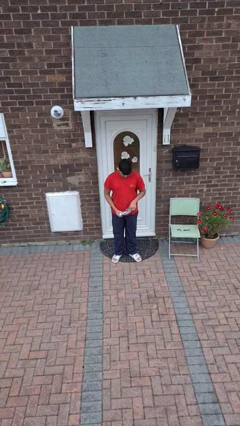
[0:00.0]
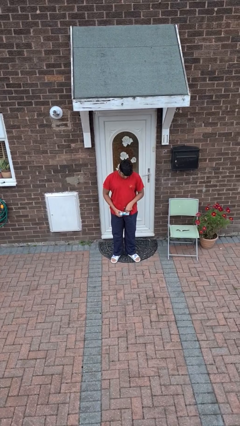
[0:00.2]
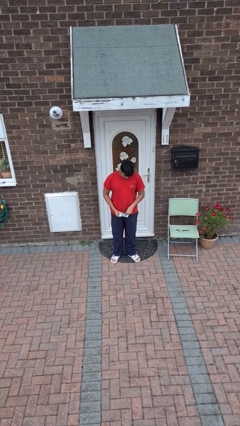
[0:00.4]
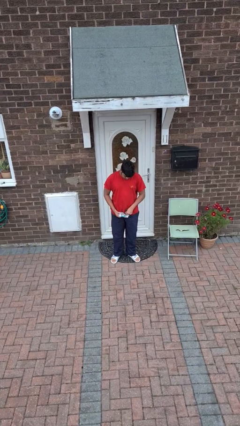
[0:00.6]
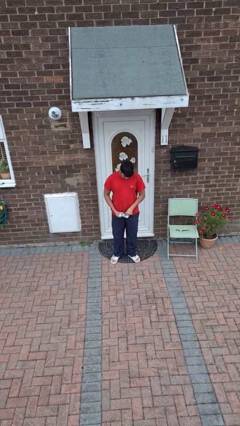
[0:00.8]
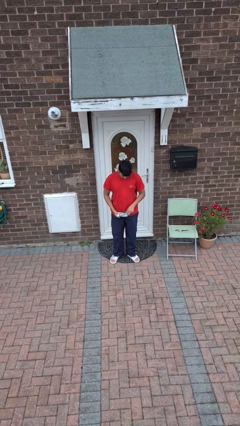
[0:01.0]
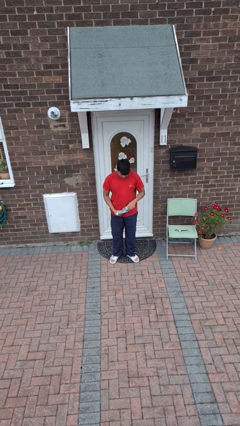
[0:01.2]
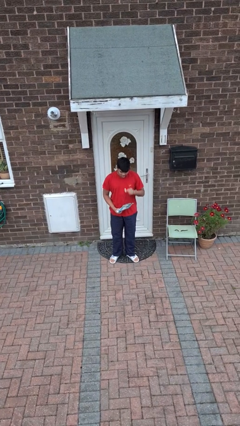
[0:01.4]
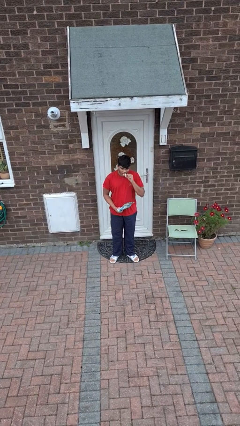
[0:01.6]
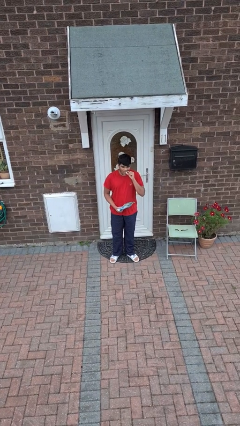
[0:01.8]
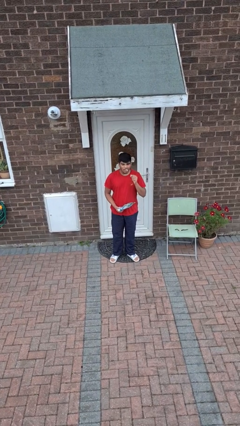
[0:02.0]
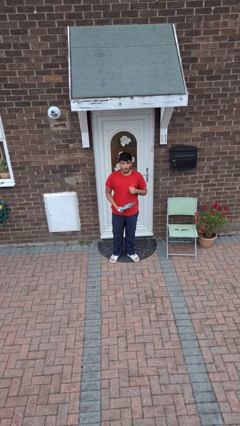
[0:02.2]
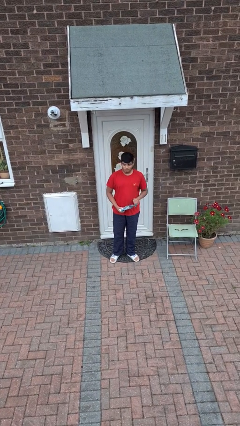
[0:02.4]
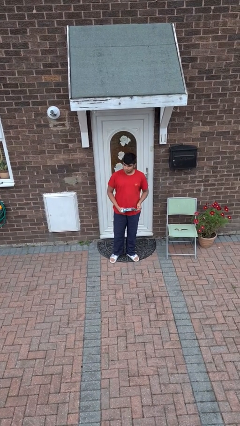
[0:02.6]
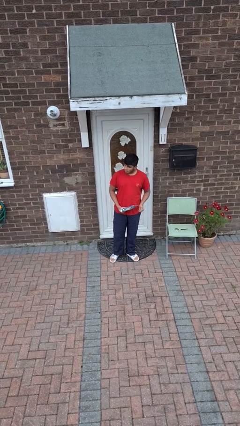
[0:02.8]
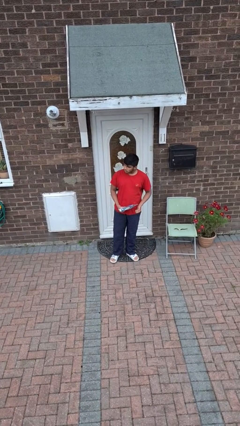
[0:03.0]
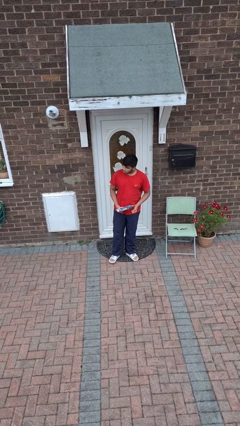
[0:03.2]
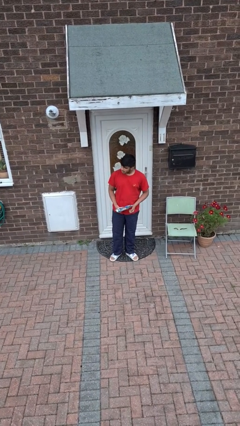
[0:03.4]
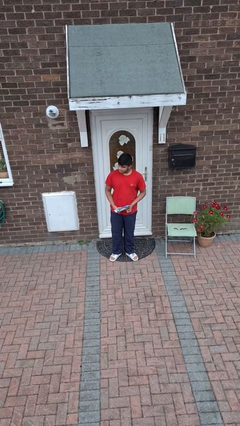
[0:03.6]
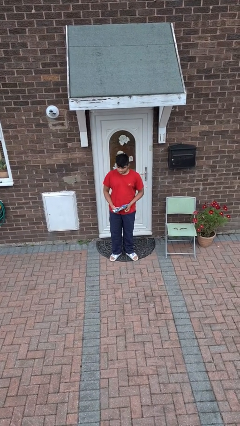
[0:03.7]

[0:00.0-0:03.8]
person eats snack from bag

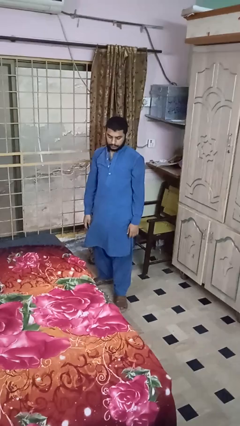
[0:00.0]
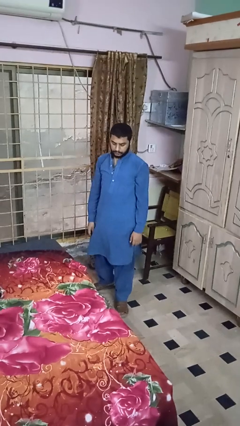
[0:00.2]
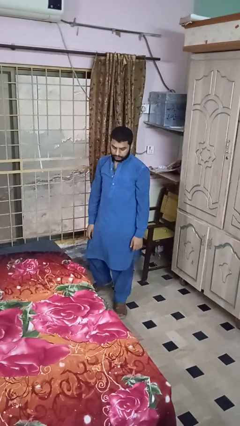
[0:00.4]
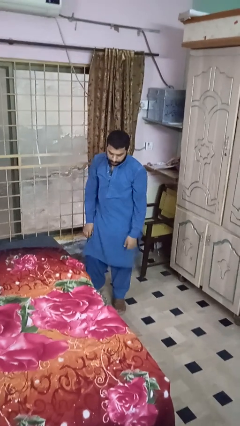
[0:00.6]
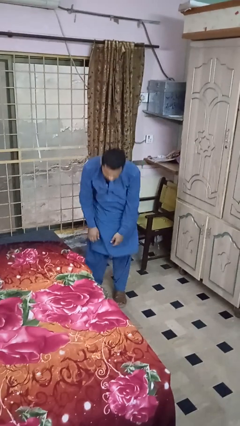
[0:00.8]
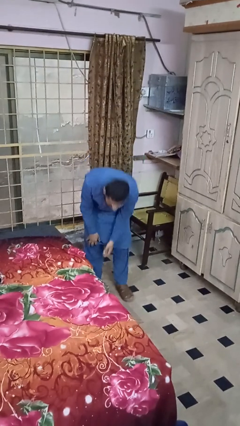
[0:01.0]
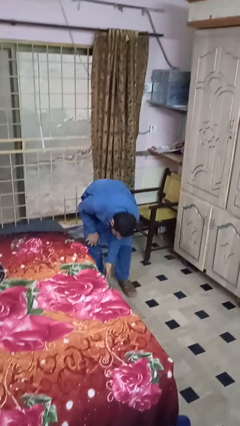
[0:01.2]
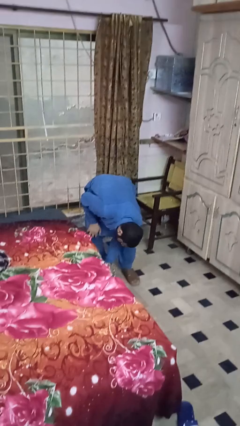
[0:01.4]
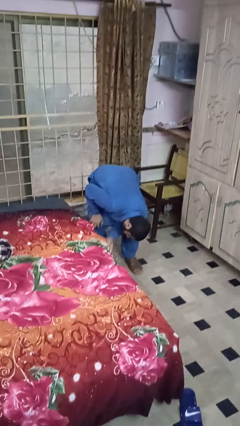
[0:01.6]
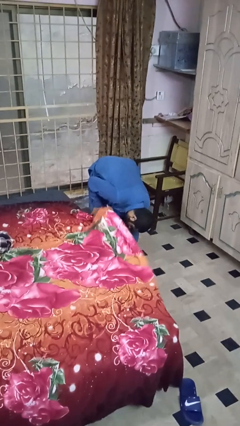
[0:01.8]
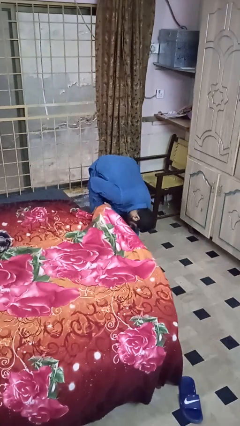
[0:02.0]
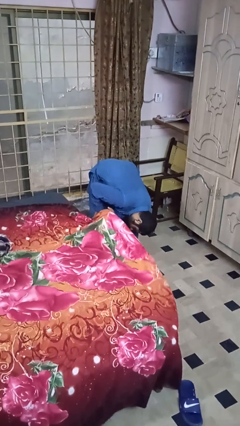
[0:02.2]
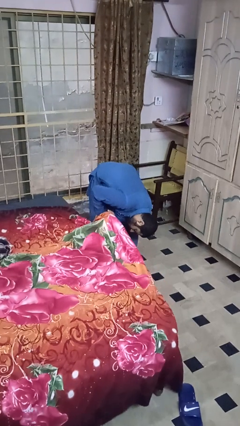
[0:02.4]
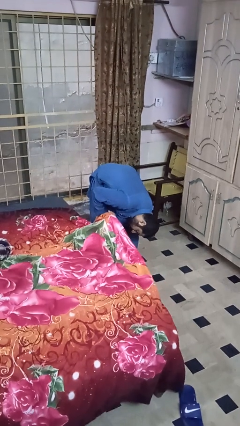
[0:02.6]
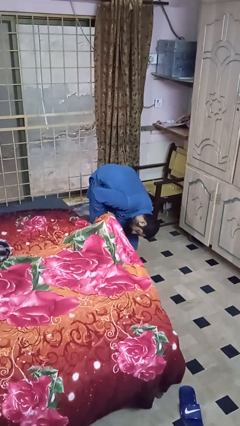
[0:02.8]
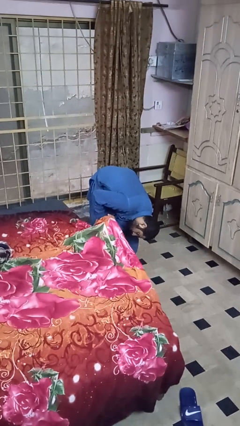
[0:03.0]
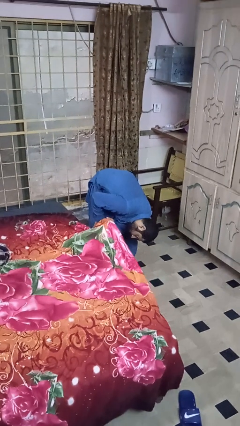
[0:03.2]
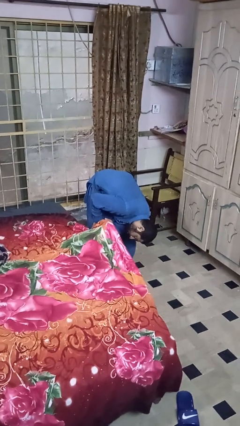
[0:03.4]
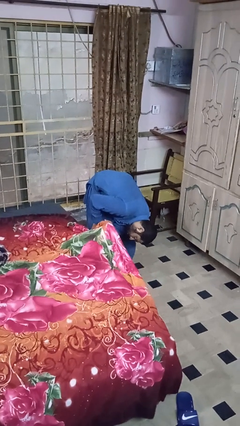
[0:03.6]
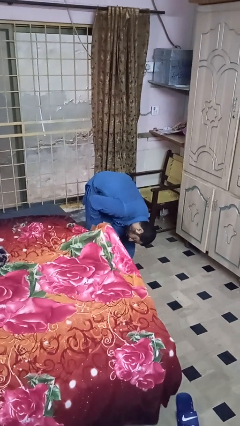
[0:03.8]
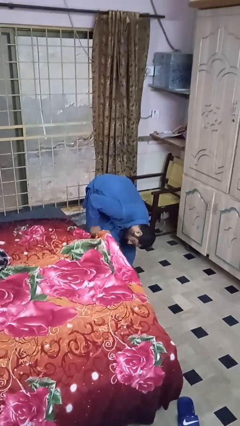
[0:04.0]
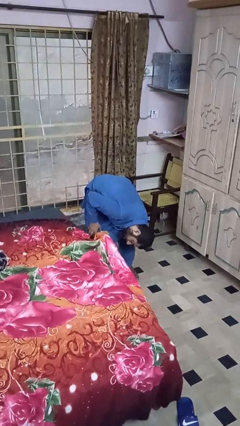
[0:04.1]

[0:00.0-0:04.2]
person searches under bed

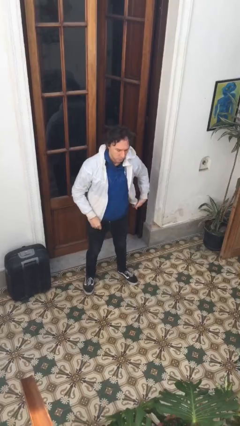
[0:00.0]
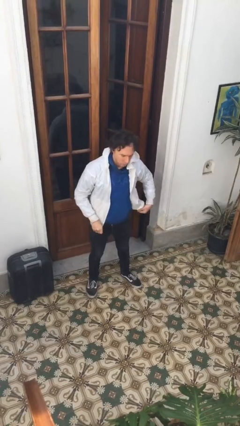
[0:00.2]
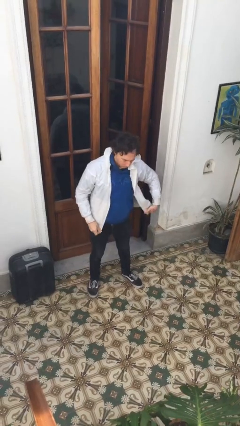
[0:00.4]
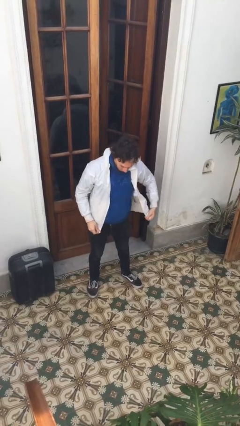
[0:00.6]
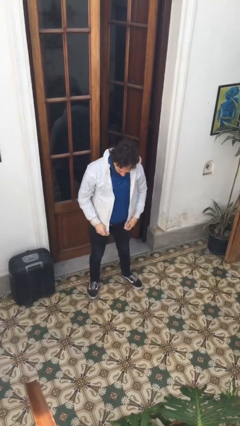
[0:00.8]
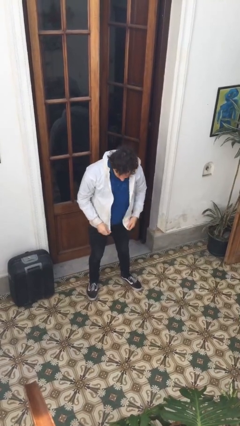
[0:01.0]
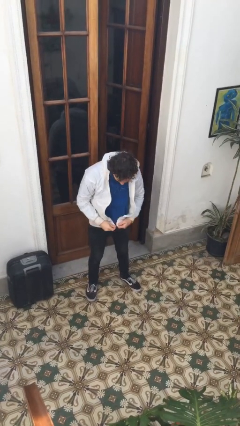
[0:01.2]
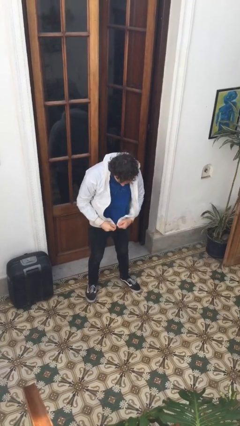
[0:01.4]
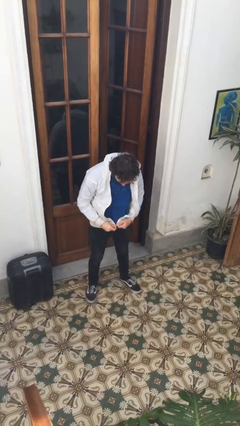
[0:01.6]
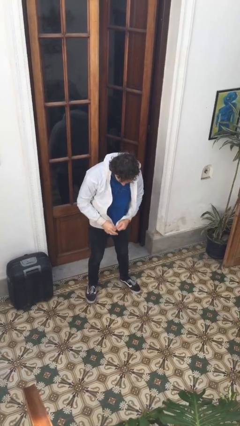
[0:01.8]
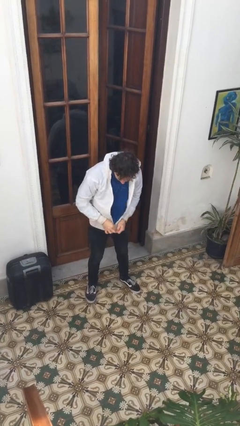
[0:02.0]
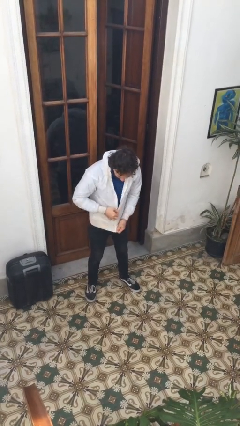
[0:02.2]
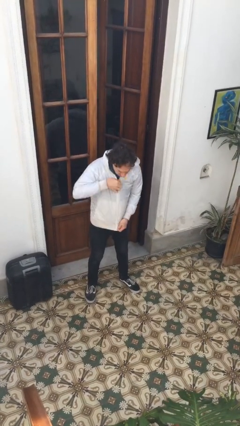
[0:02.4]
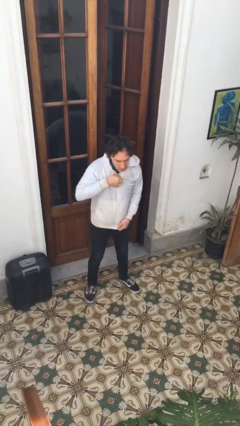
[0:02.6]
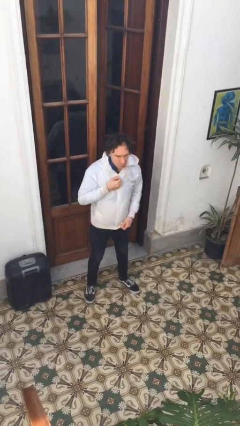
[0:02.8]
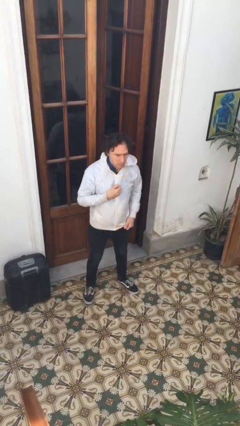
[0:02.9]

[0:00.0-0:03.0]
person zips up jacket

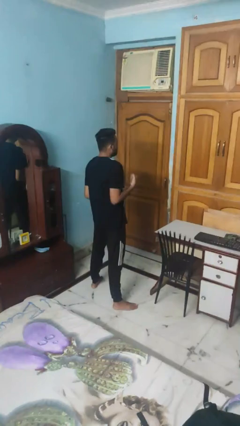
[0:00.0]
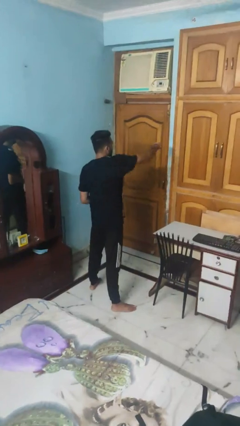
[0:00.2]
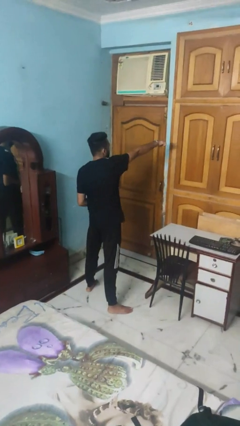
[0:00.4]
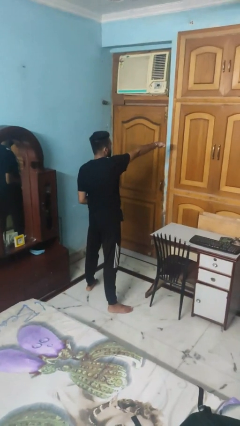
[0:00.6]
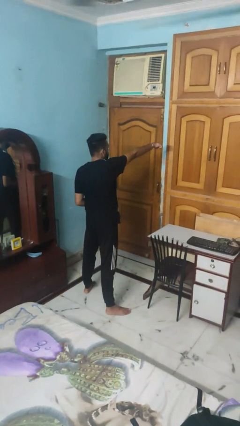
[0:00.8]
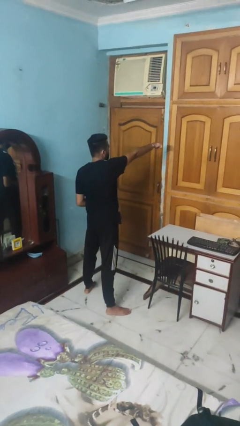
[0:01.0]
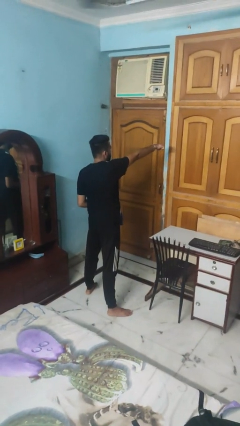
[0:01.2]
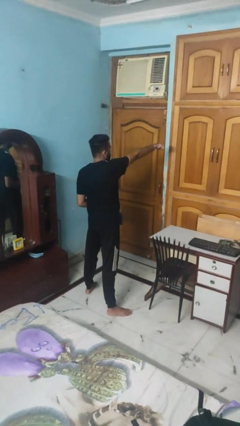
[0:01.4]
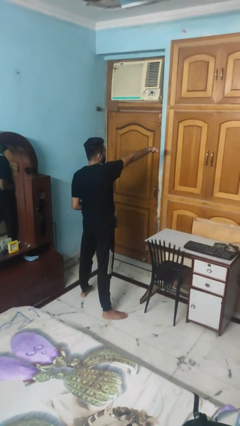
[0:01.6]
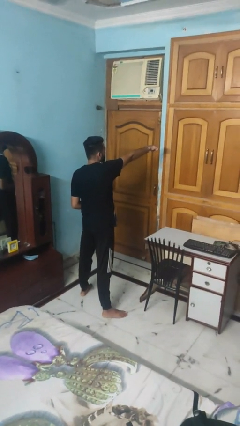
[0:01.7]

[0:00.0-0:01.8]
person punches

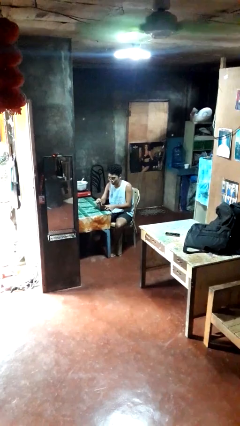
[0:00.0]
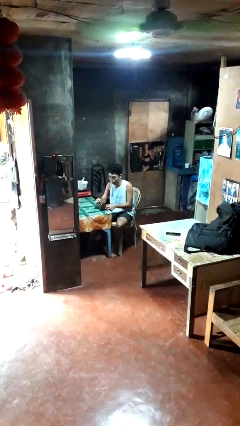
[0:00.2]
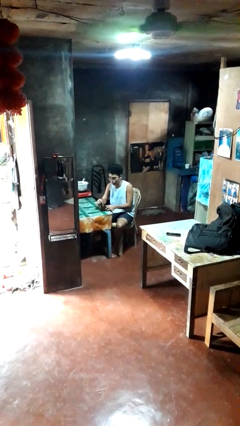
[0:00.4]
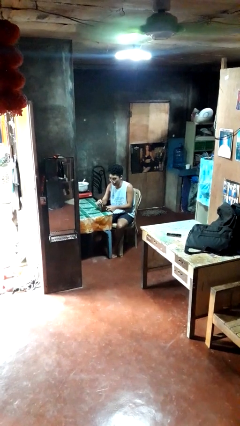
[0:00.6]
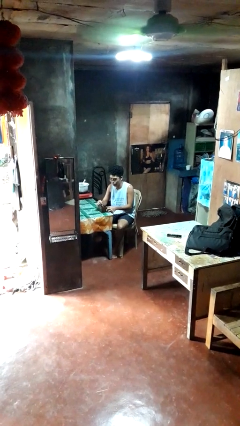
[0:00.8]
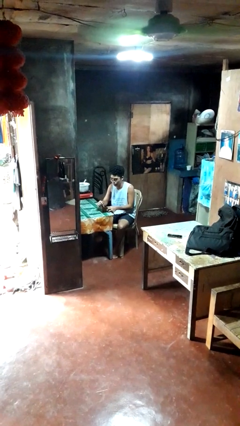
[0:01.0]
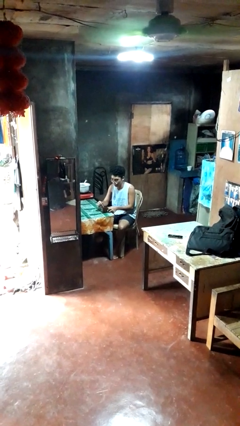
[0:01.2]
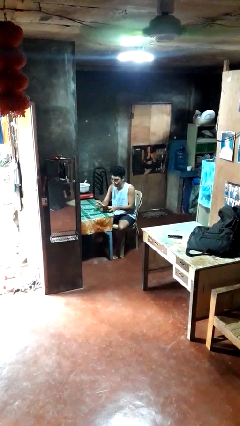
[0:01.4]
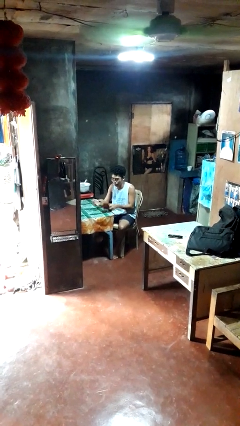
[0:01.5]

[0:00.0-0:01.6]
person stirs mug

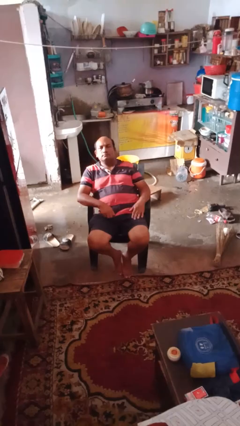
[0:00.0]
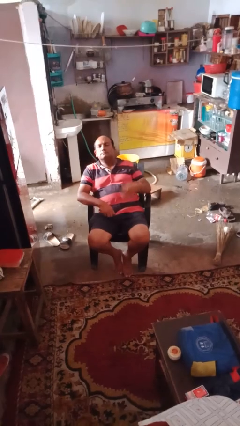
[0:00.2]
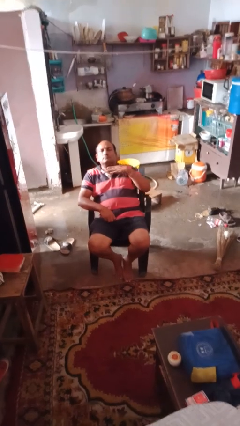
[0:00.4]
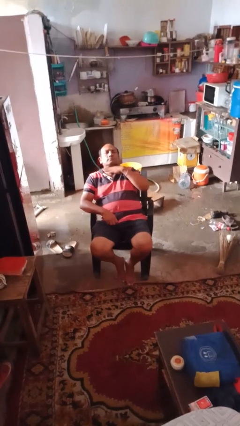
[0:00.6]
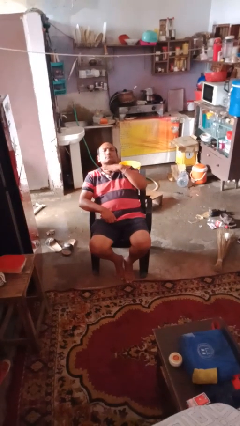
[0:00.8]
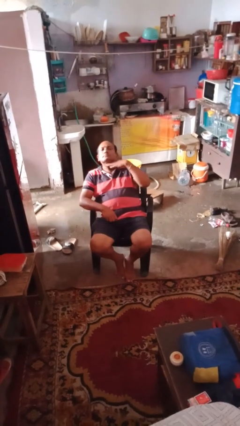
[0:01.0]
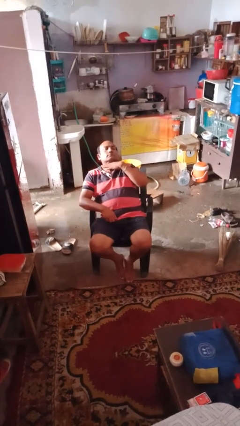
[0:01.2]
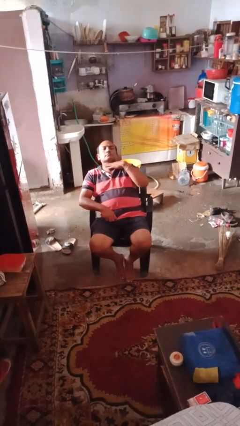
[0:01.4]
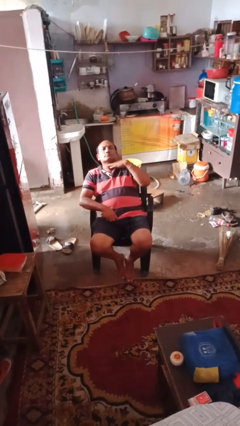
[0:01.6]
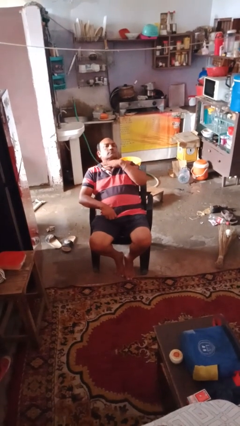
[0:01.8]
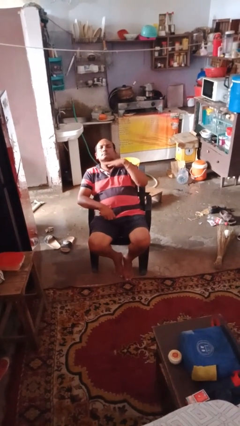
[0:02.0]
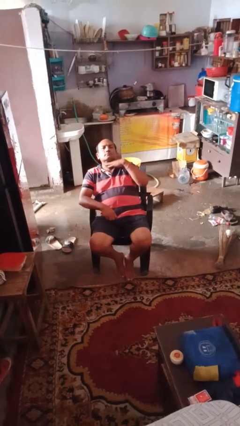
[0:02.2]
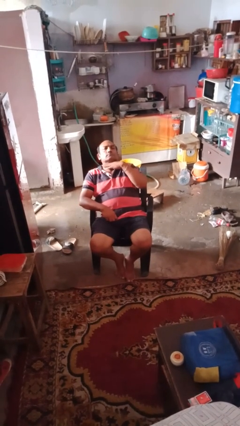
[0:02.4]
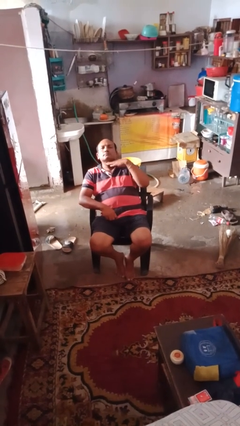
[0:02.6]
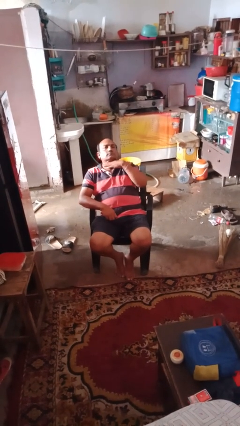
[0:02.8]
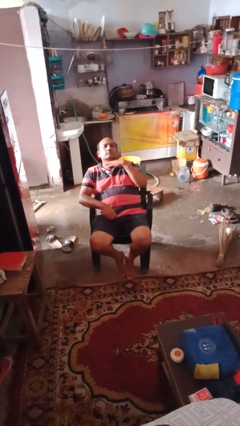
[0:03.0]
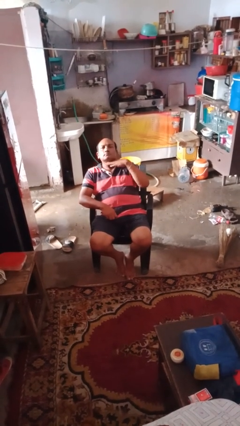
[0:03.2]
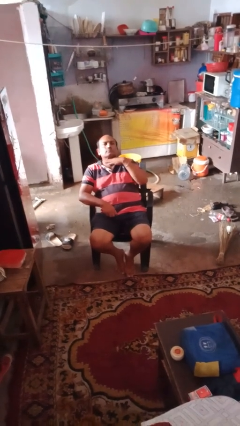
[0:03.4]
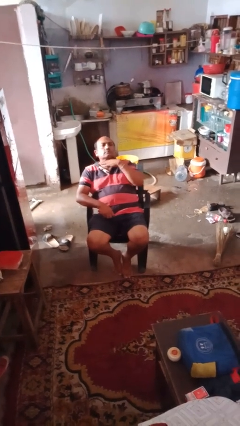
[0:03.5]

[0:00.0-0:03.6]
person gestures cut
